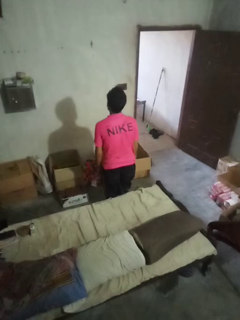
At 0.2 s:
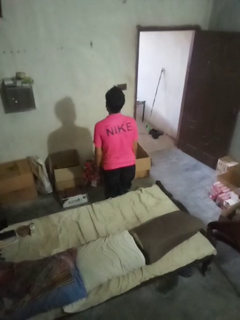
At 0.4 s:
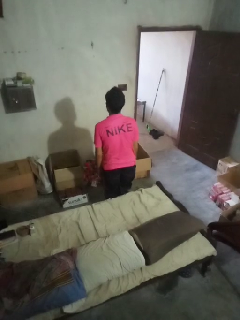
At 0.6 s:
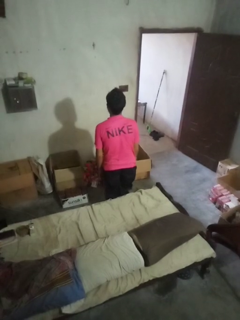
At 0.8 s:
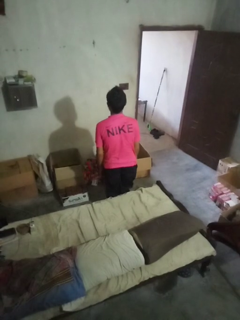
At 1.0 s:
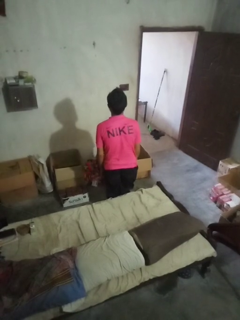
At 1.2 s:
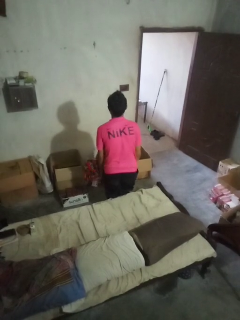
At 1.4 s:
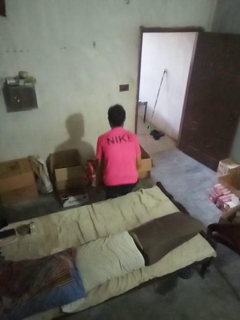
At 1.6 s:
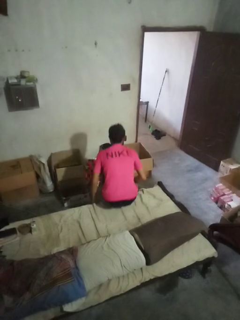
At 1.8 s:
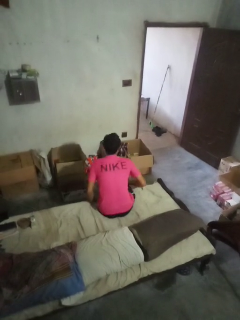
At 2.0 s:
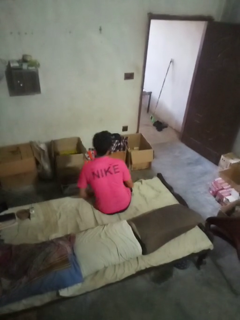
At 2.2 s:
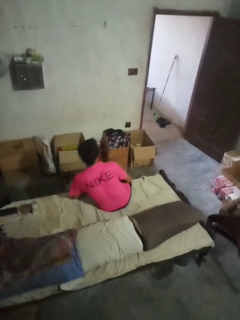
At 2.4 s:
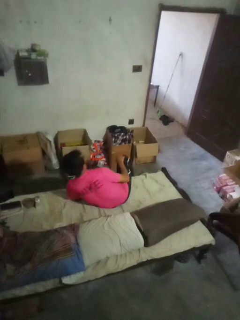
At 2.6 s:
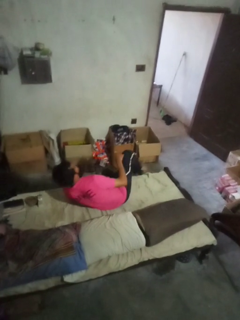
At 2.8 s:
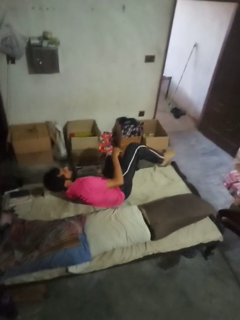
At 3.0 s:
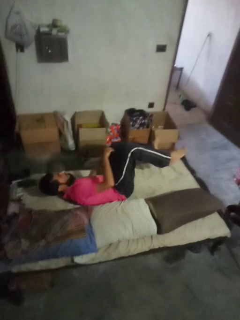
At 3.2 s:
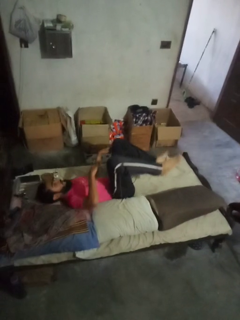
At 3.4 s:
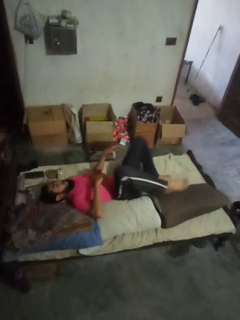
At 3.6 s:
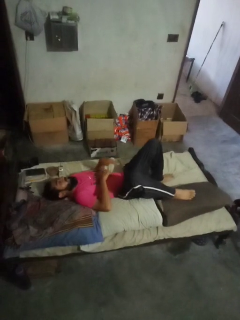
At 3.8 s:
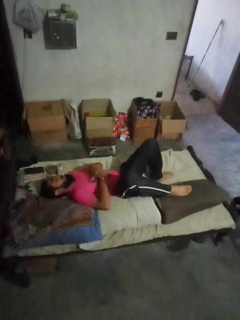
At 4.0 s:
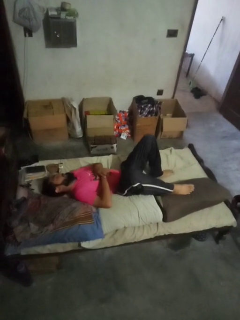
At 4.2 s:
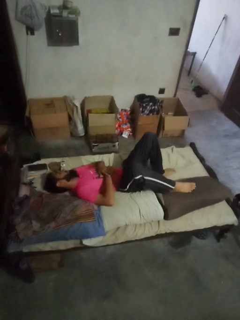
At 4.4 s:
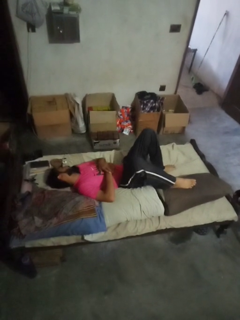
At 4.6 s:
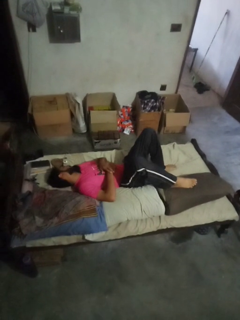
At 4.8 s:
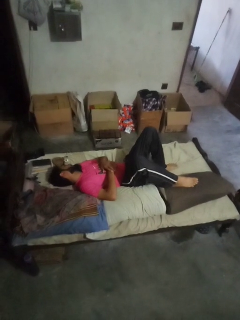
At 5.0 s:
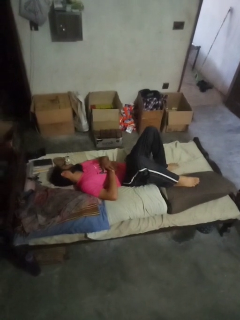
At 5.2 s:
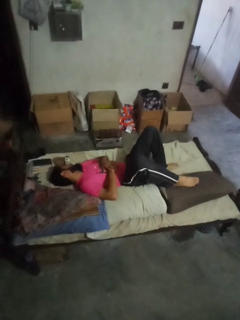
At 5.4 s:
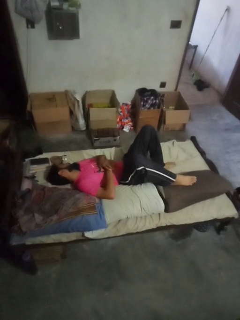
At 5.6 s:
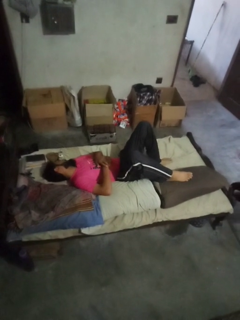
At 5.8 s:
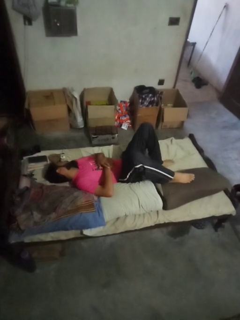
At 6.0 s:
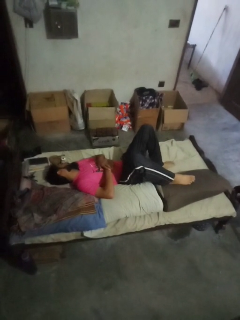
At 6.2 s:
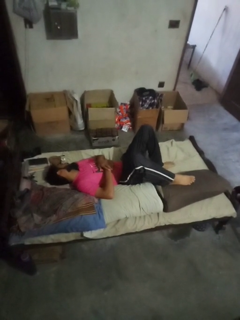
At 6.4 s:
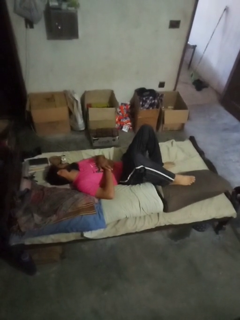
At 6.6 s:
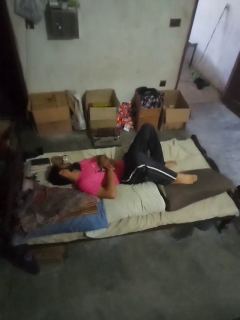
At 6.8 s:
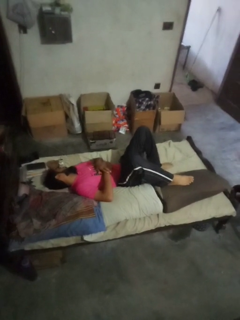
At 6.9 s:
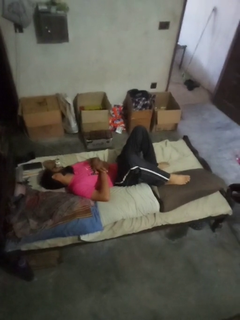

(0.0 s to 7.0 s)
person lies down on couch

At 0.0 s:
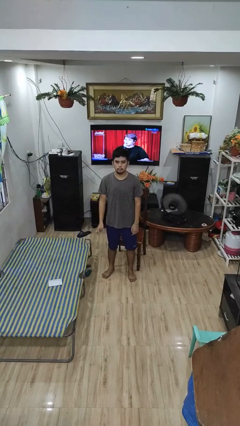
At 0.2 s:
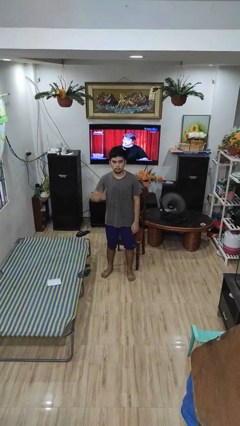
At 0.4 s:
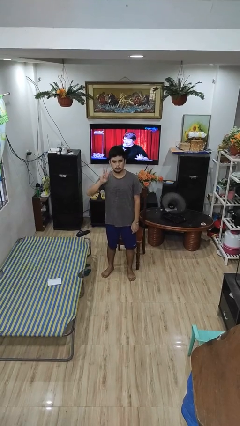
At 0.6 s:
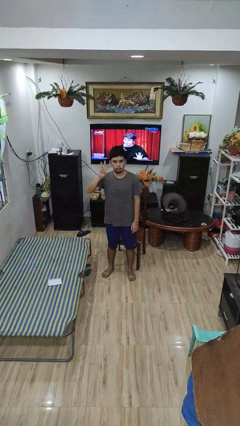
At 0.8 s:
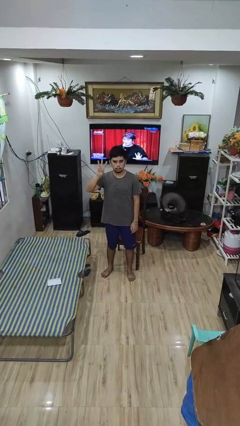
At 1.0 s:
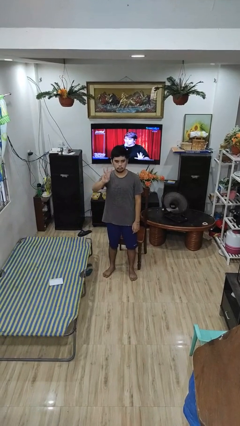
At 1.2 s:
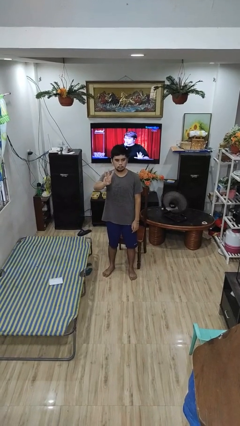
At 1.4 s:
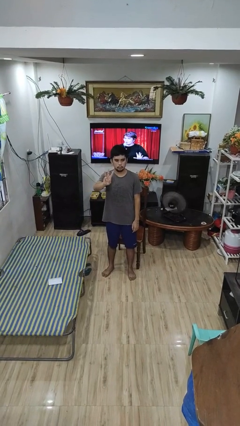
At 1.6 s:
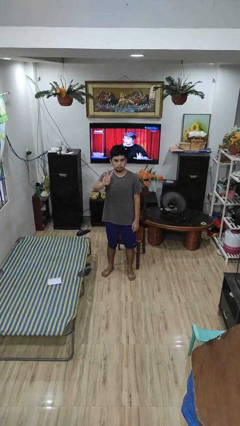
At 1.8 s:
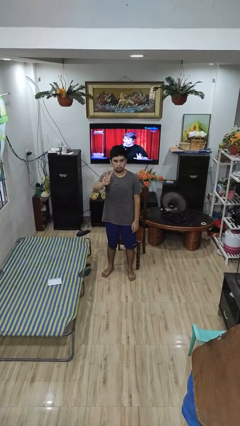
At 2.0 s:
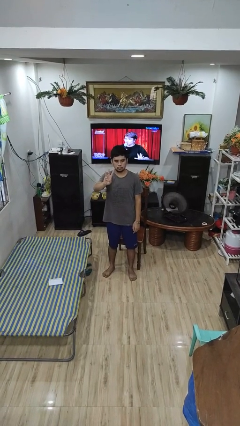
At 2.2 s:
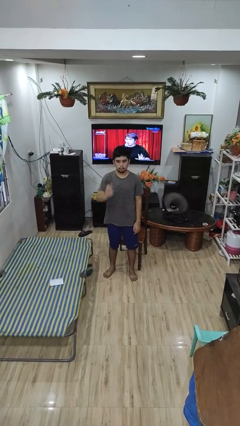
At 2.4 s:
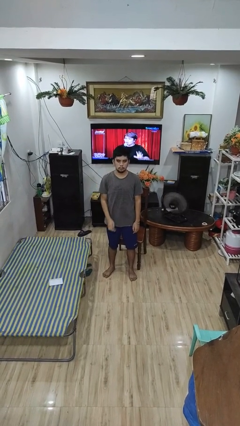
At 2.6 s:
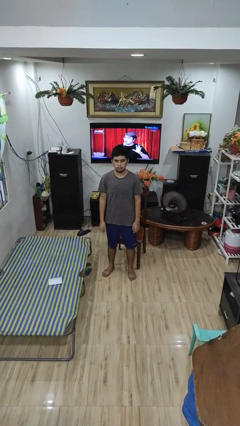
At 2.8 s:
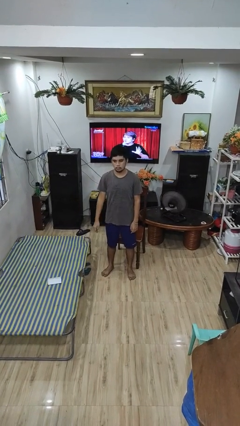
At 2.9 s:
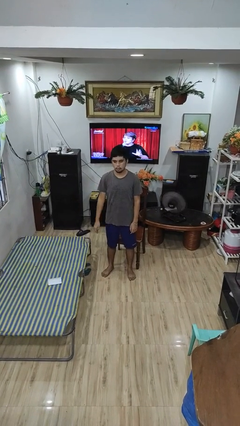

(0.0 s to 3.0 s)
person gestures number three

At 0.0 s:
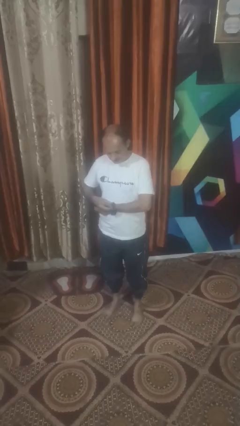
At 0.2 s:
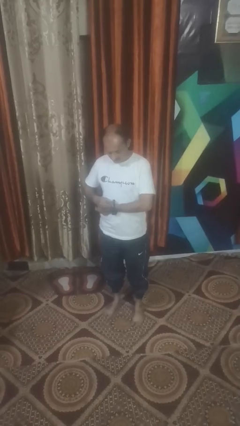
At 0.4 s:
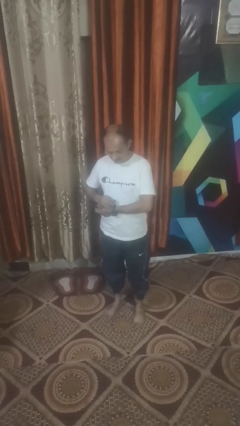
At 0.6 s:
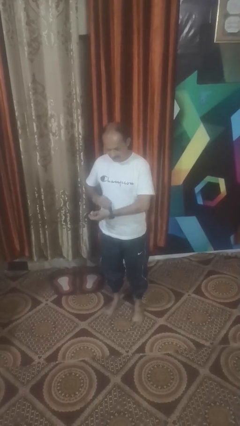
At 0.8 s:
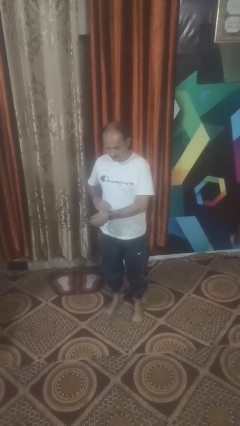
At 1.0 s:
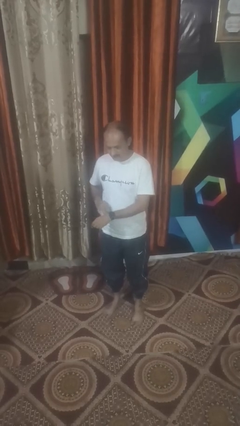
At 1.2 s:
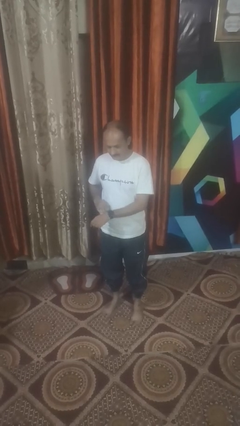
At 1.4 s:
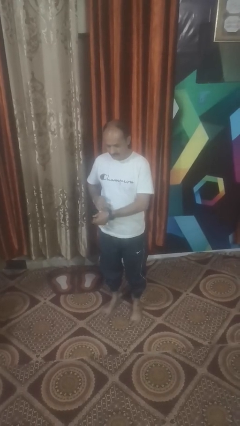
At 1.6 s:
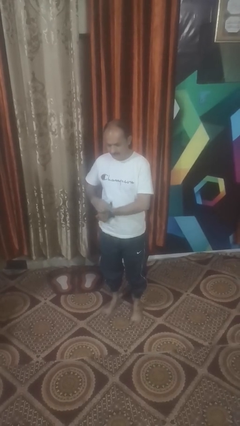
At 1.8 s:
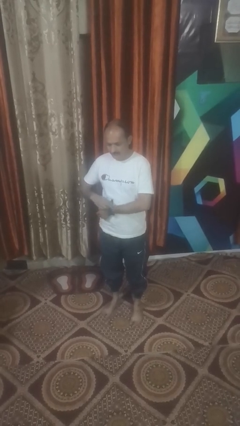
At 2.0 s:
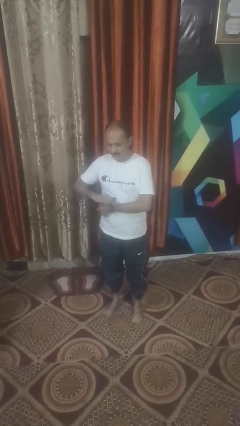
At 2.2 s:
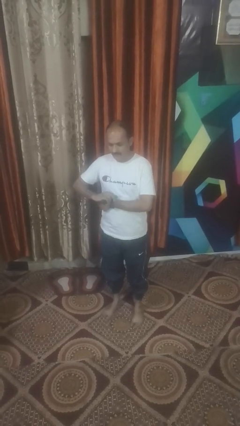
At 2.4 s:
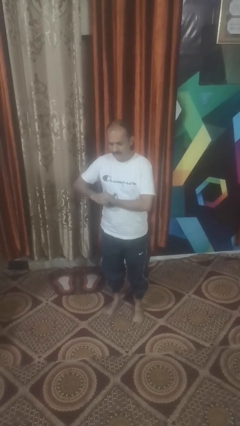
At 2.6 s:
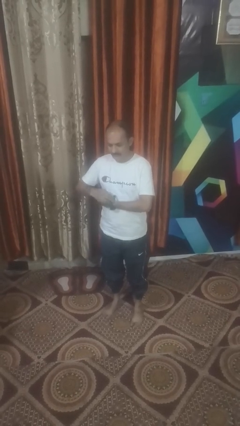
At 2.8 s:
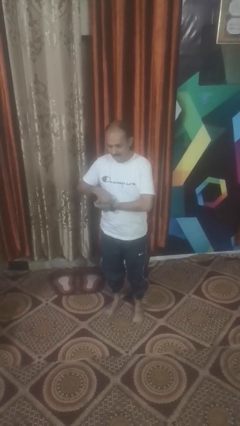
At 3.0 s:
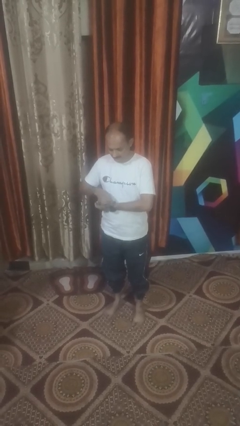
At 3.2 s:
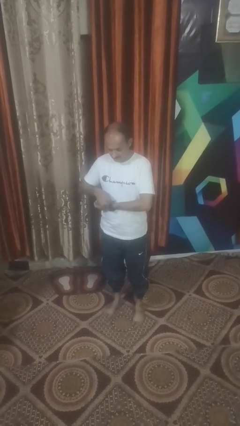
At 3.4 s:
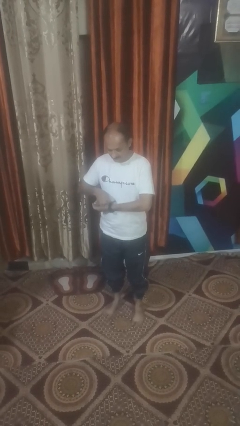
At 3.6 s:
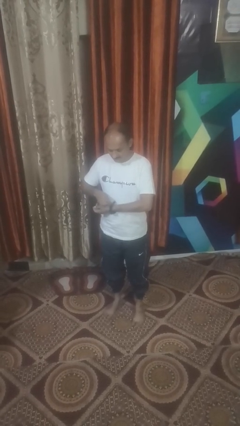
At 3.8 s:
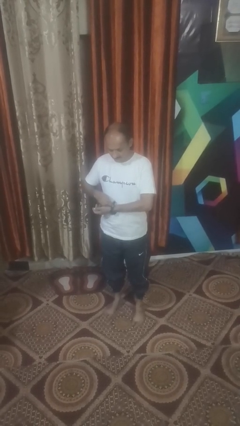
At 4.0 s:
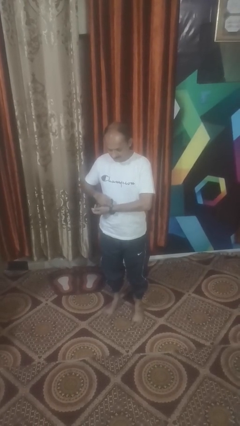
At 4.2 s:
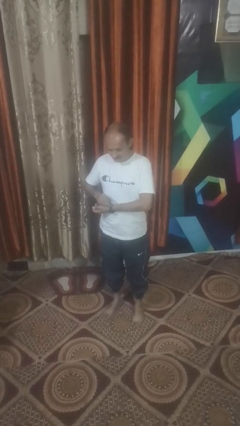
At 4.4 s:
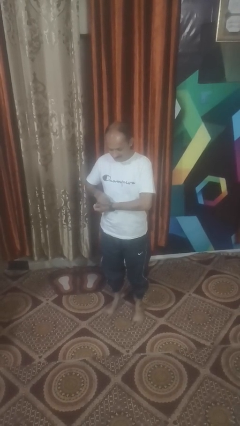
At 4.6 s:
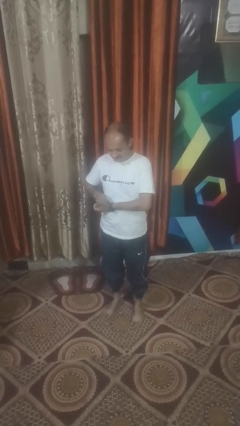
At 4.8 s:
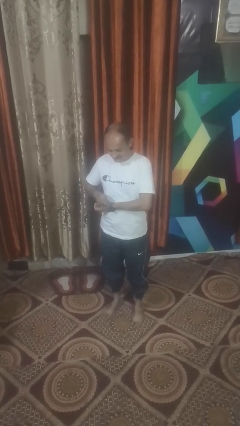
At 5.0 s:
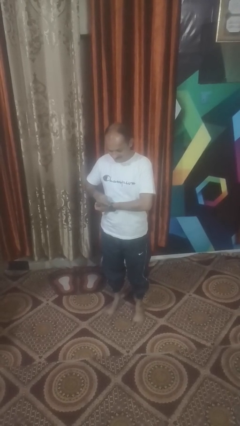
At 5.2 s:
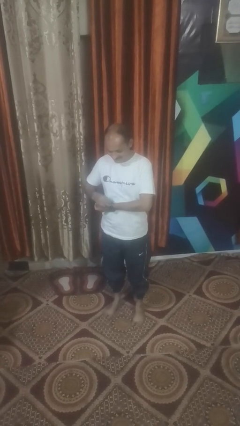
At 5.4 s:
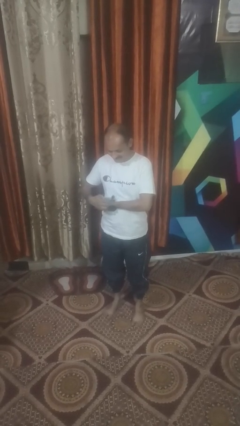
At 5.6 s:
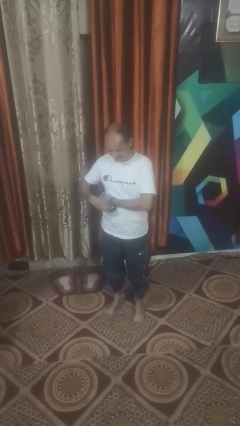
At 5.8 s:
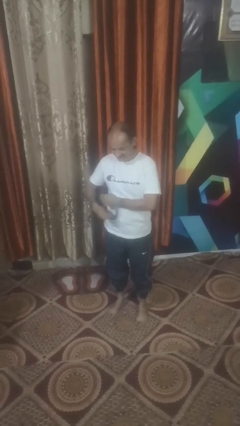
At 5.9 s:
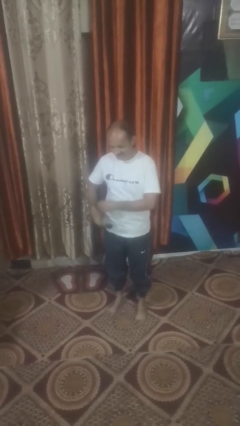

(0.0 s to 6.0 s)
person takes off wristwatch

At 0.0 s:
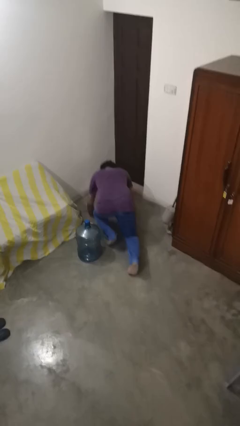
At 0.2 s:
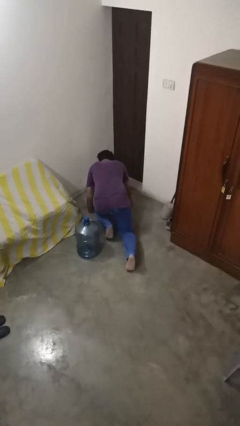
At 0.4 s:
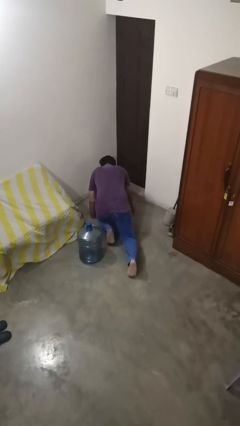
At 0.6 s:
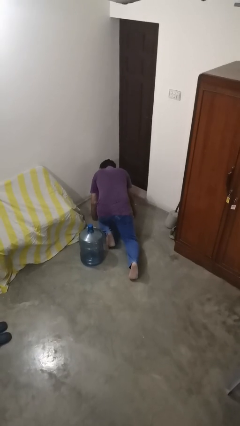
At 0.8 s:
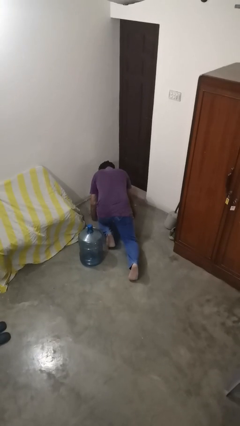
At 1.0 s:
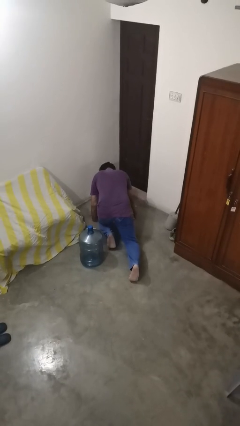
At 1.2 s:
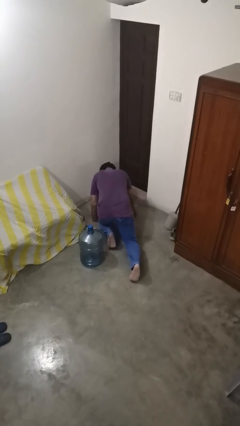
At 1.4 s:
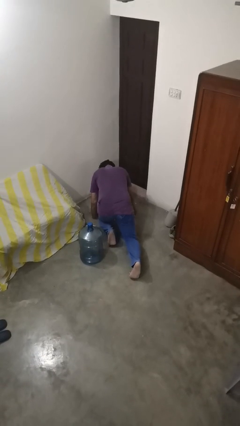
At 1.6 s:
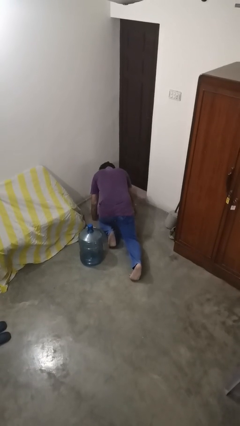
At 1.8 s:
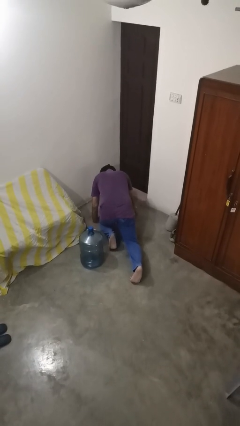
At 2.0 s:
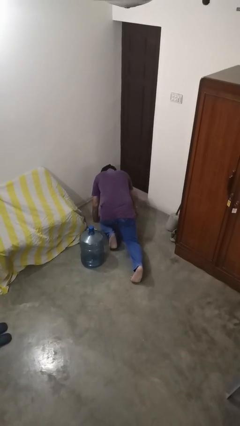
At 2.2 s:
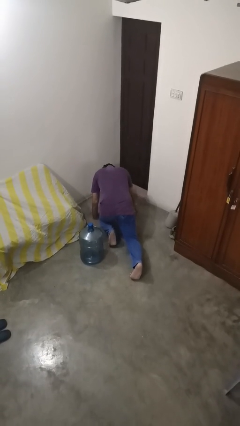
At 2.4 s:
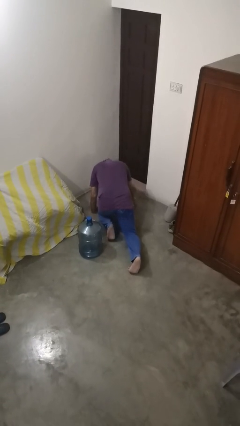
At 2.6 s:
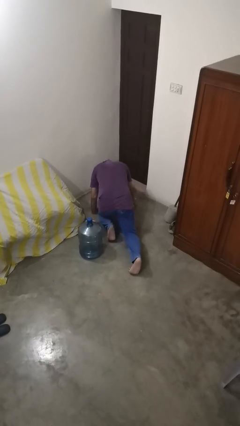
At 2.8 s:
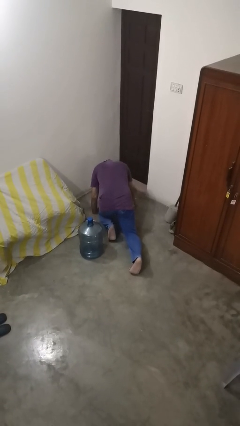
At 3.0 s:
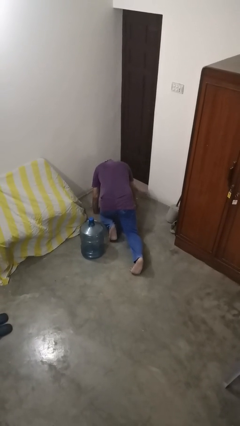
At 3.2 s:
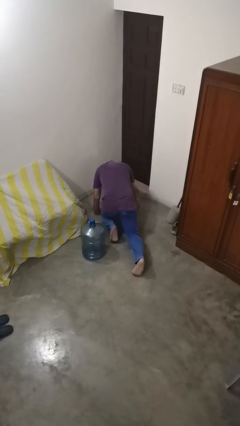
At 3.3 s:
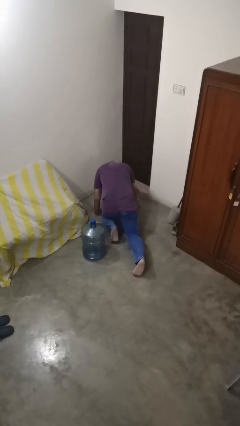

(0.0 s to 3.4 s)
person lies down on floor

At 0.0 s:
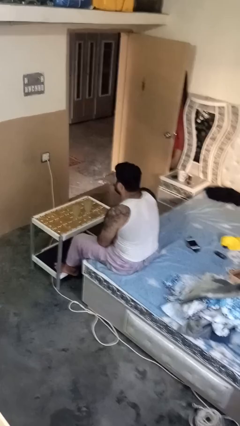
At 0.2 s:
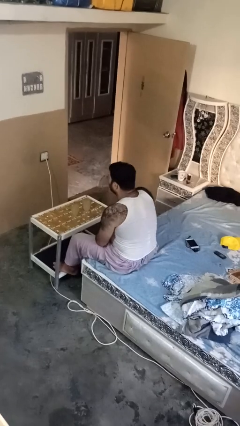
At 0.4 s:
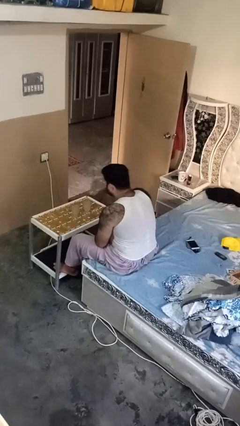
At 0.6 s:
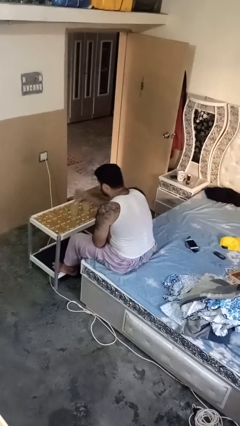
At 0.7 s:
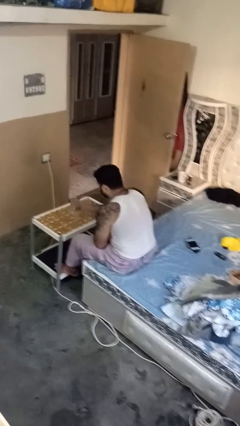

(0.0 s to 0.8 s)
person puts down object on table
